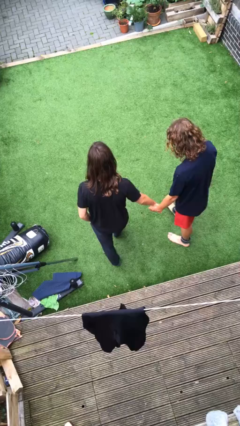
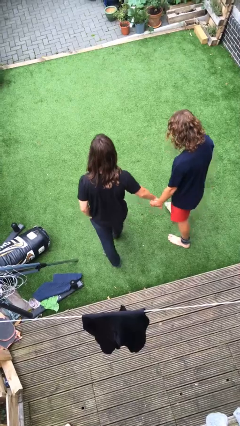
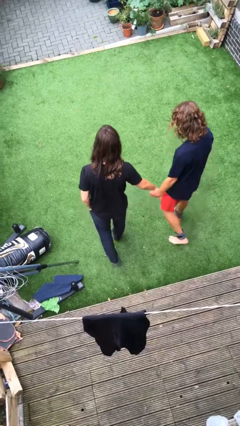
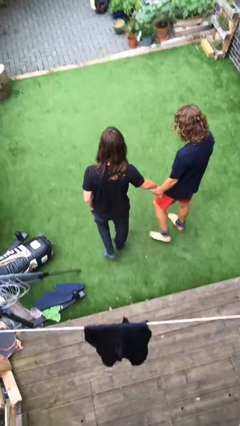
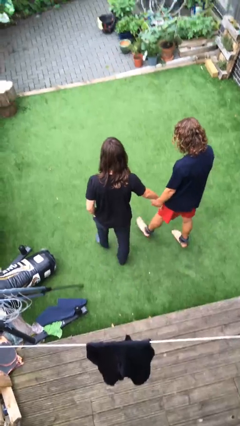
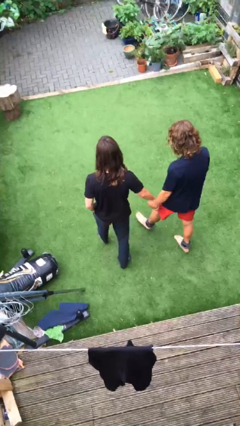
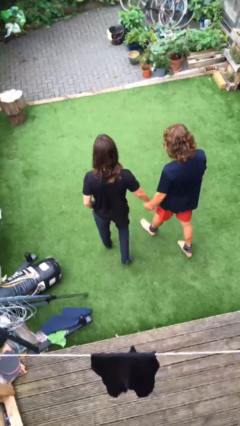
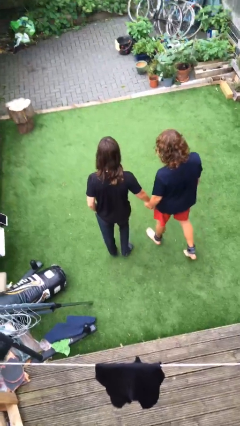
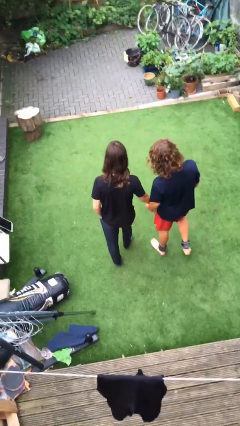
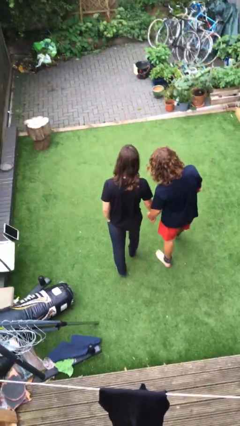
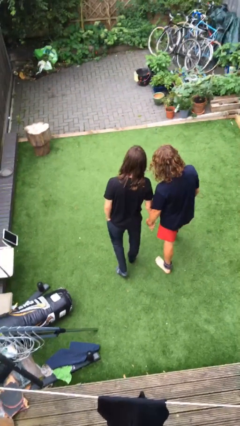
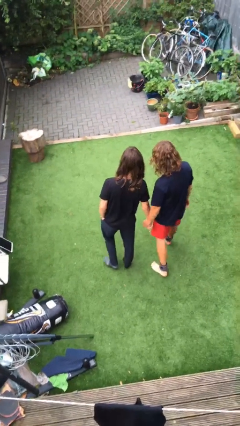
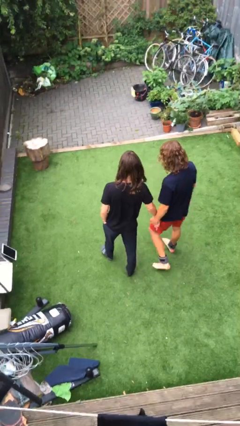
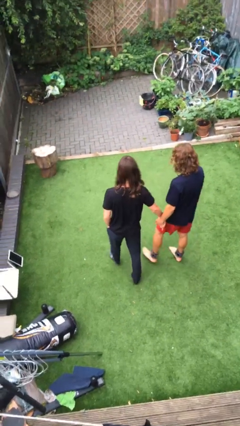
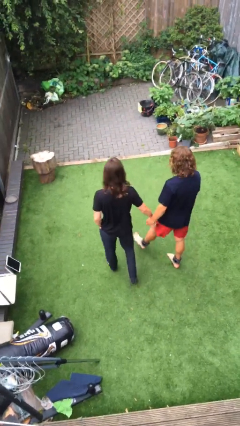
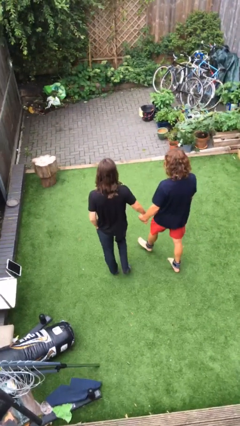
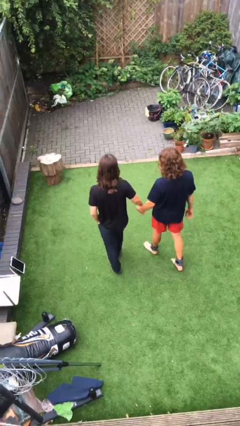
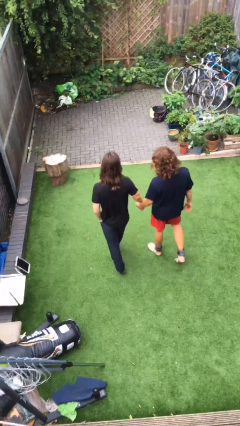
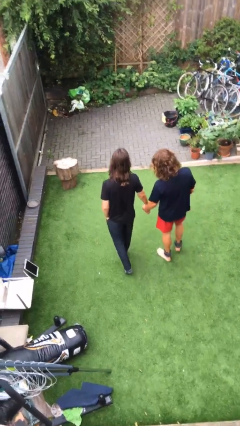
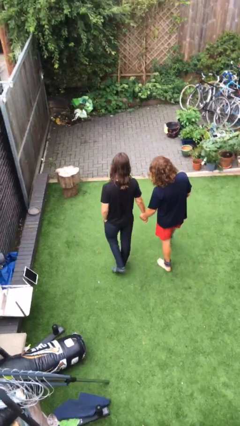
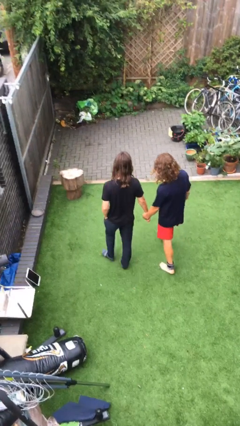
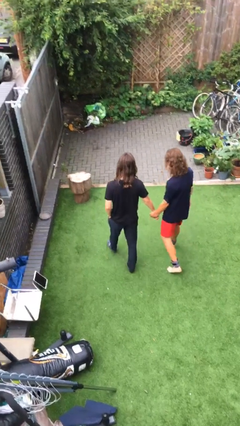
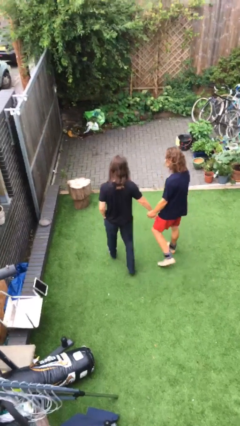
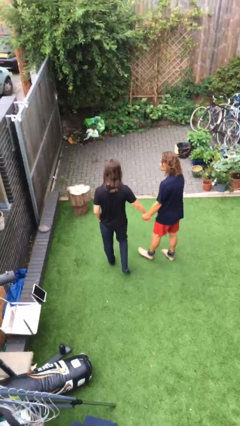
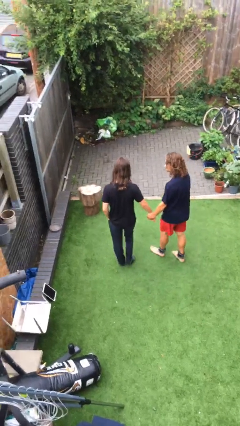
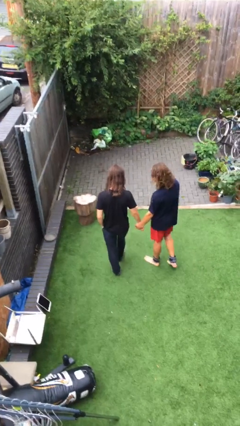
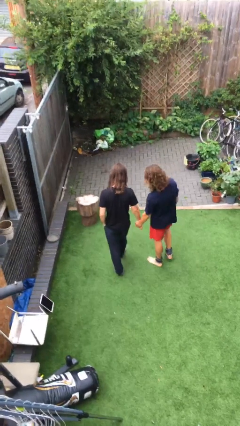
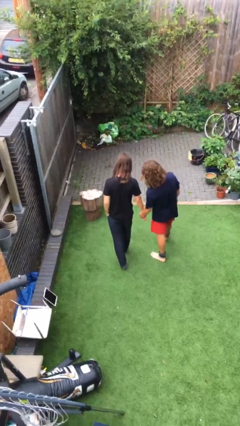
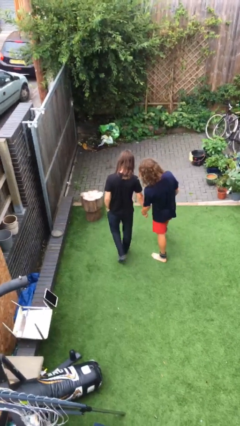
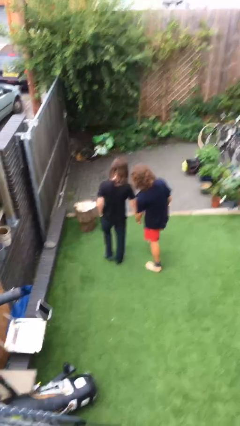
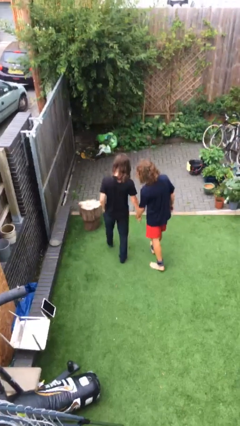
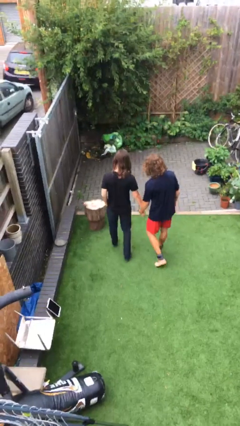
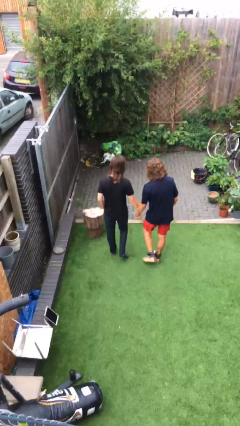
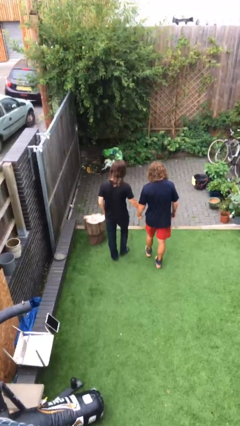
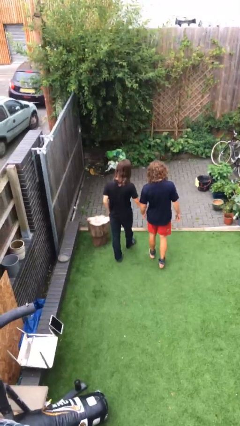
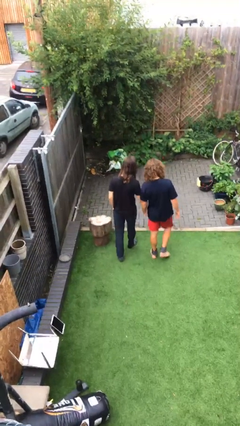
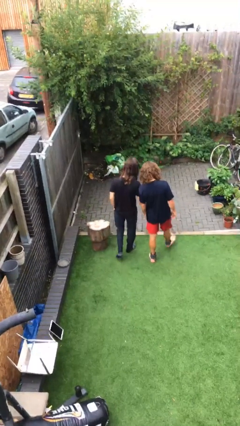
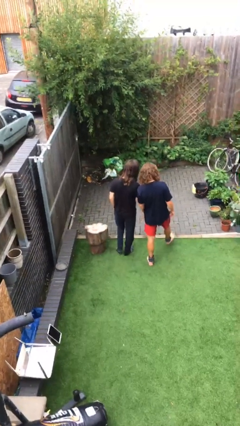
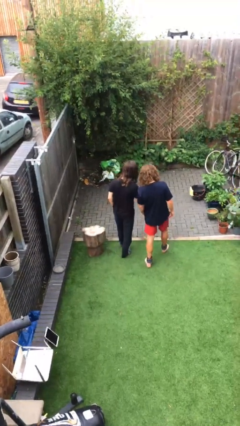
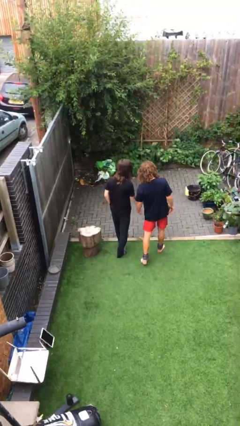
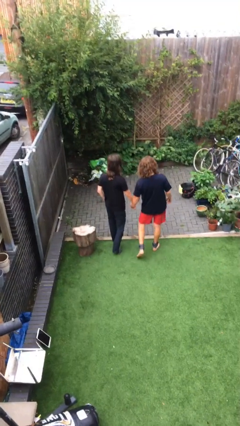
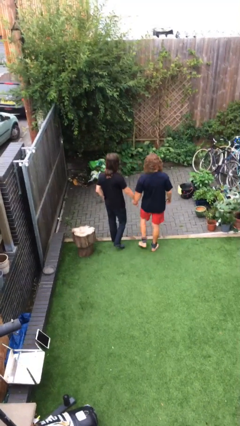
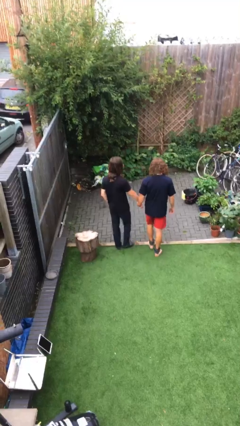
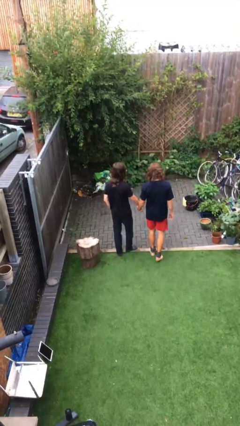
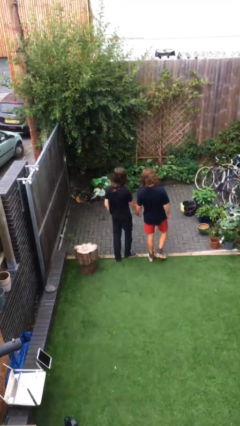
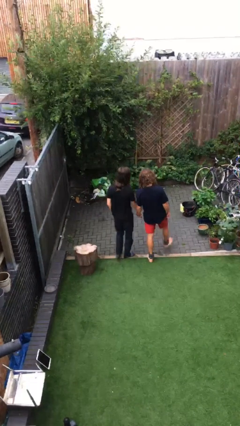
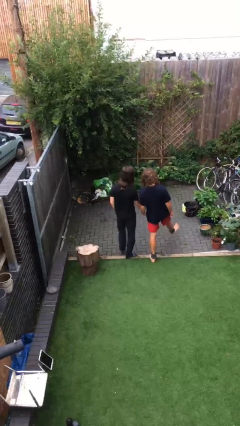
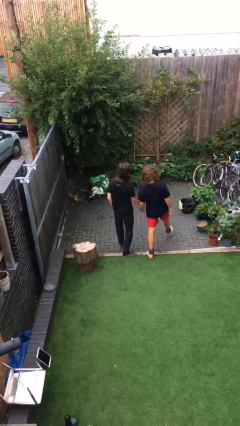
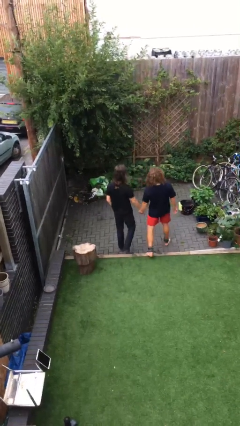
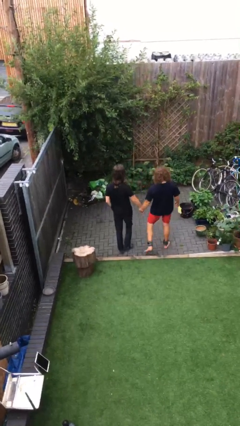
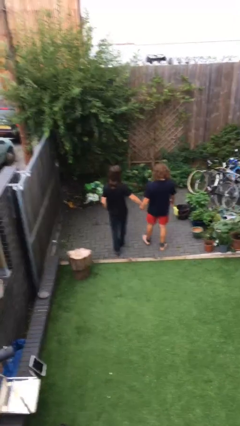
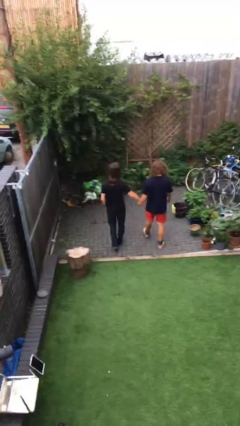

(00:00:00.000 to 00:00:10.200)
person holds hand

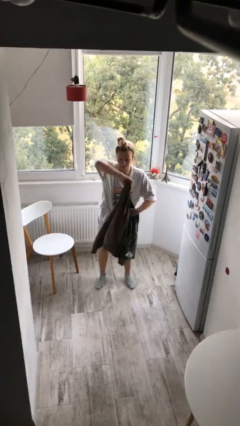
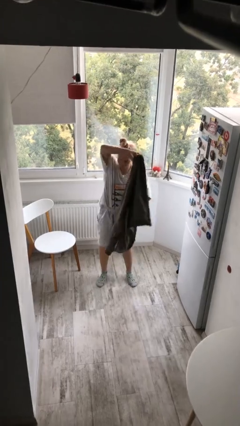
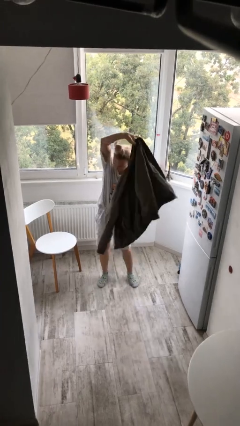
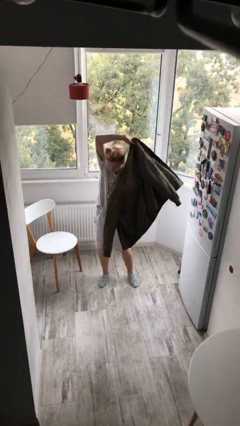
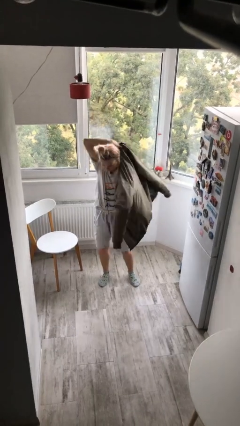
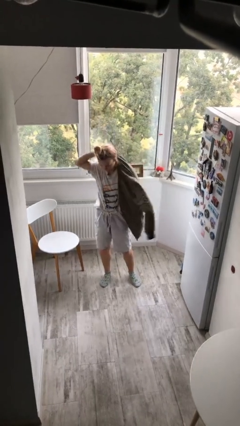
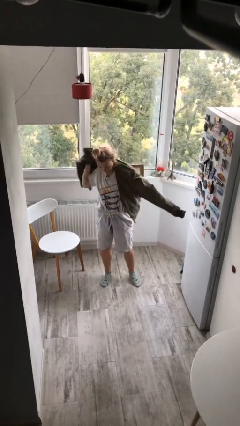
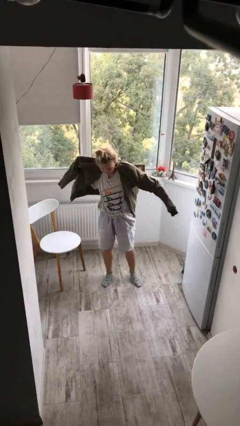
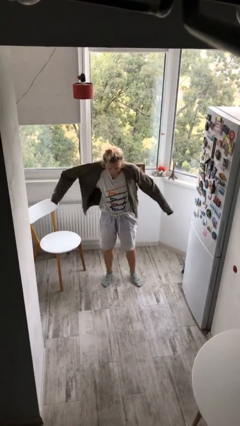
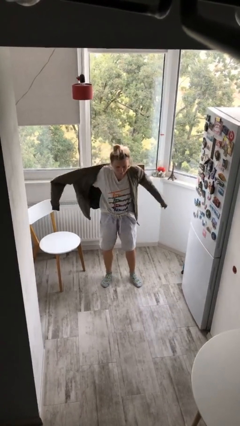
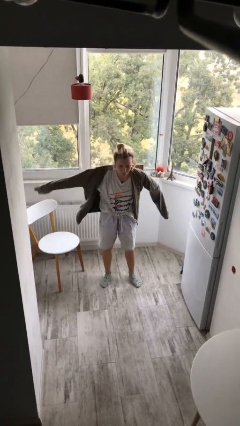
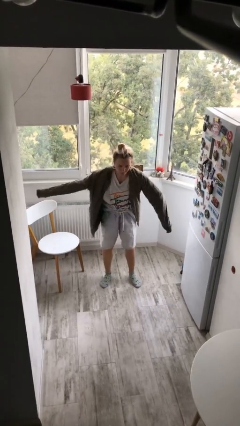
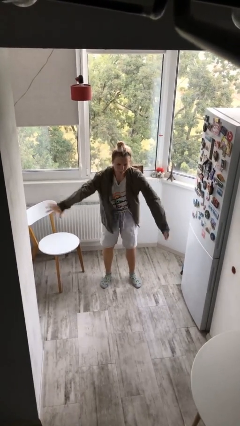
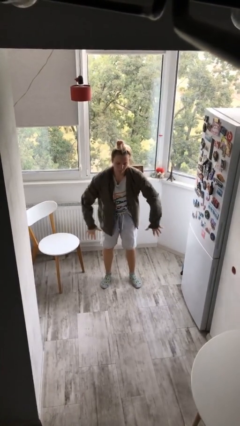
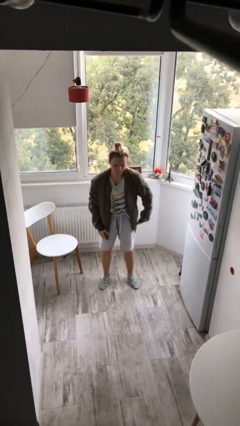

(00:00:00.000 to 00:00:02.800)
person puts on jacket

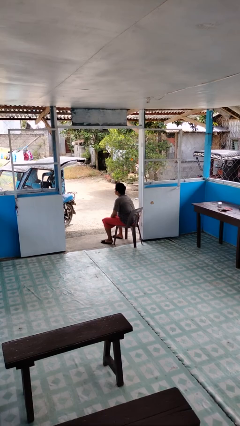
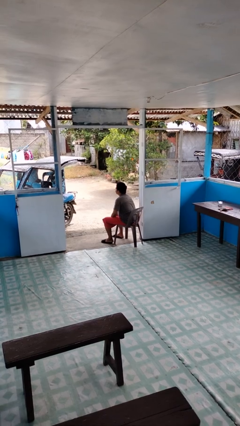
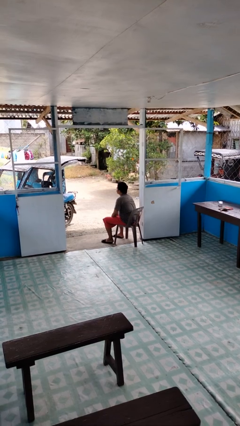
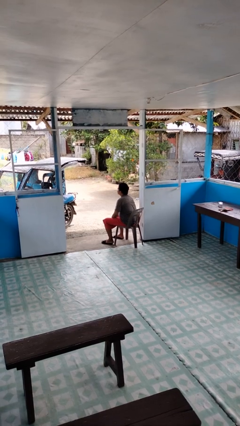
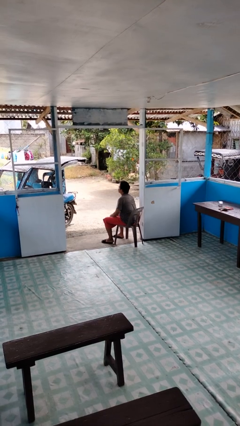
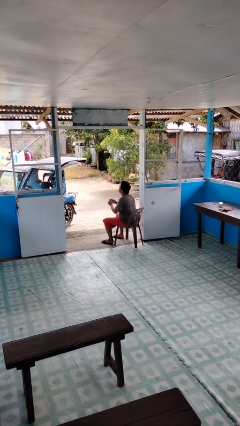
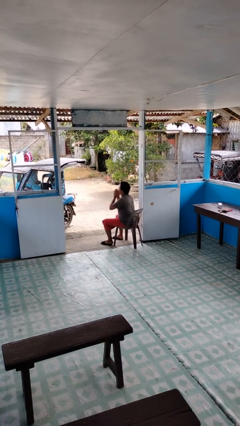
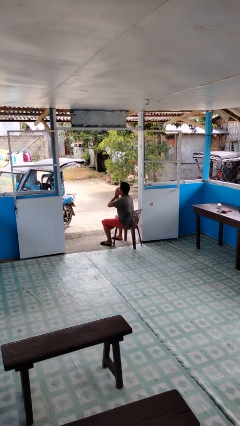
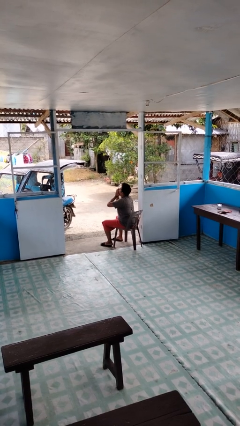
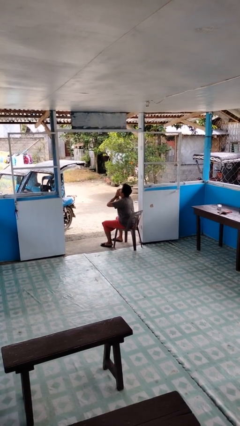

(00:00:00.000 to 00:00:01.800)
person yawns

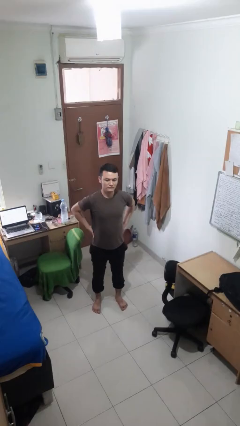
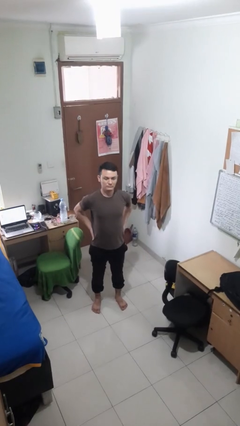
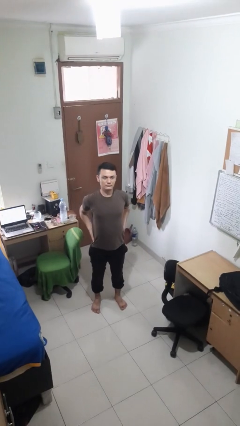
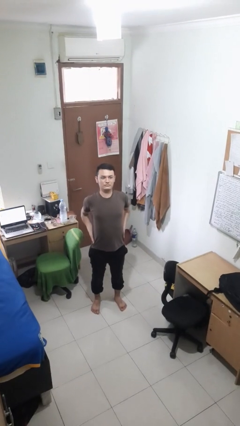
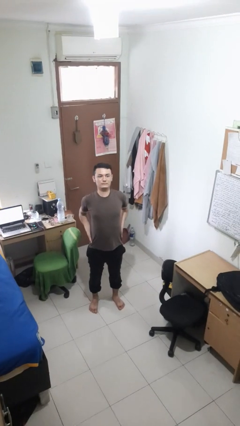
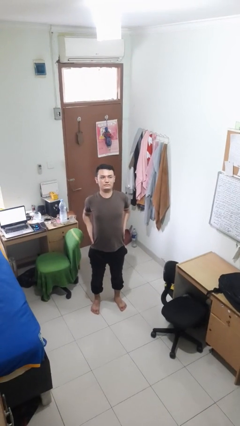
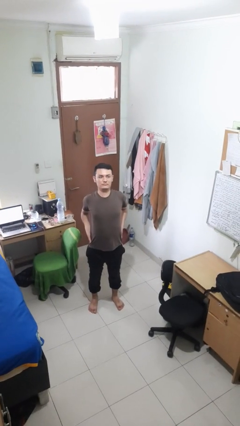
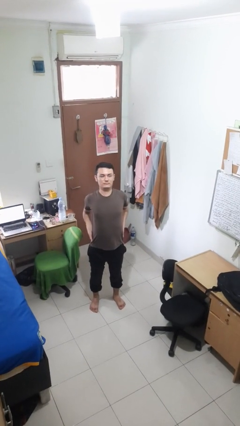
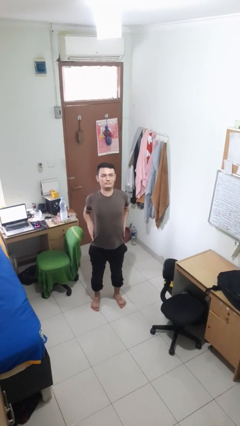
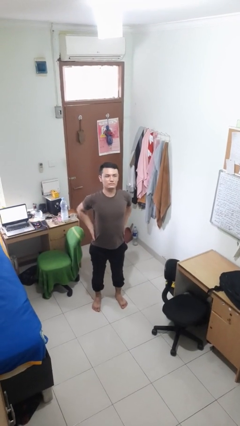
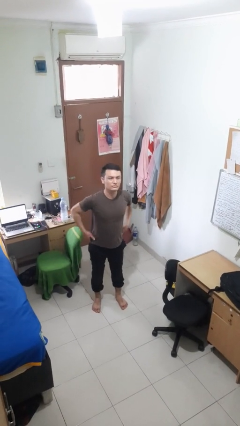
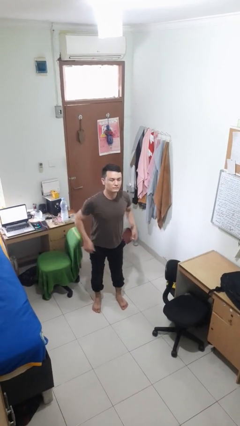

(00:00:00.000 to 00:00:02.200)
person stretches back

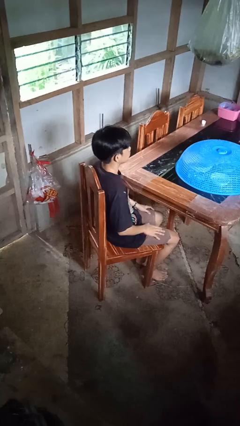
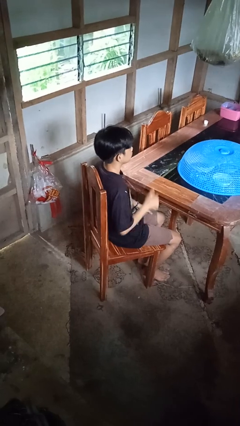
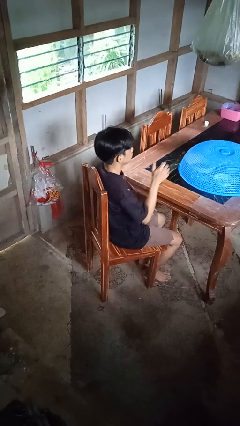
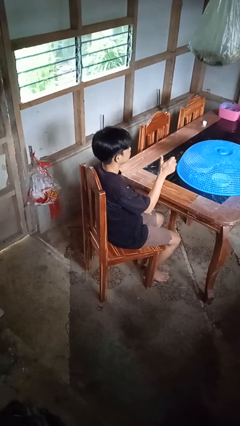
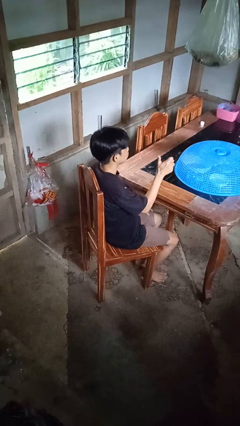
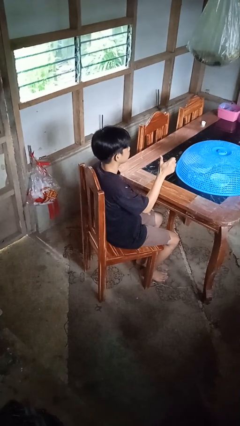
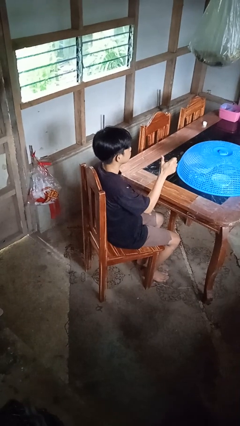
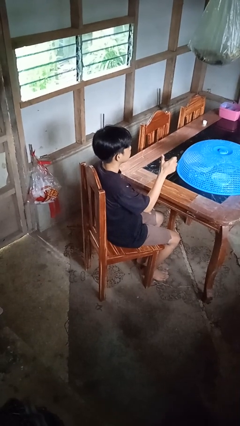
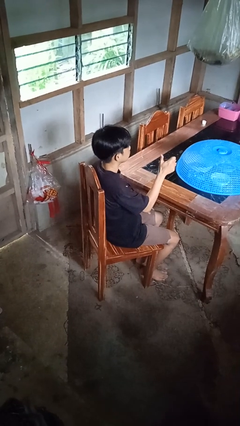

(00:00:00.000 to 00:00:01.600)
person gestures thumbs up
